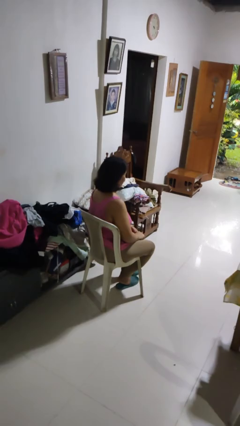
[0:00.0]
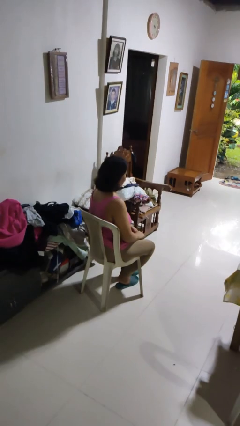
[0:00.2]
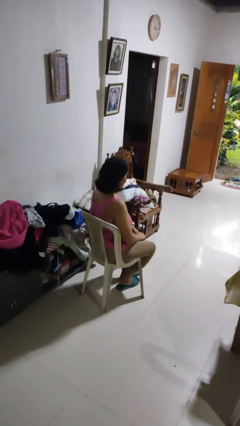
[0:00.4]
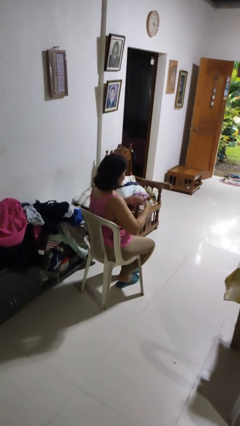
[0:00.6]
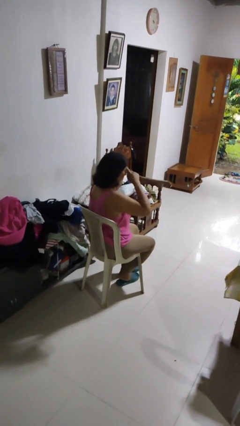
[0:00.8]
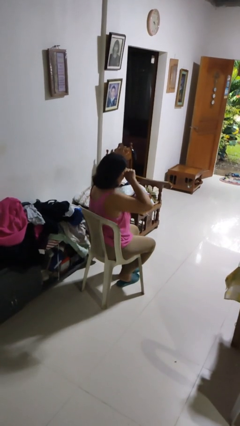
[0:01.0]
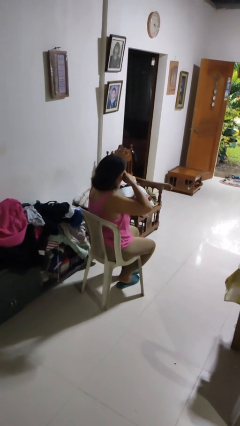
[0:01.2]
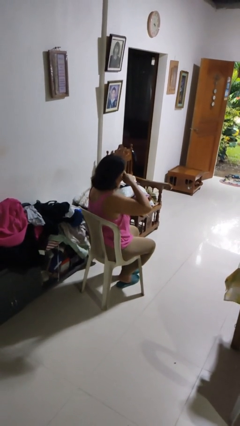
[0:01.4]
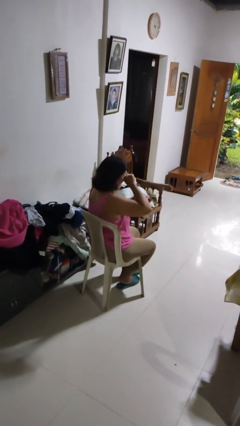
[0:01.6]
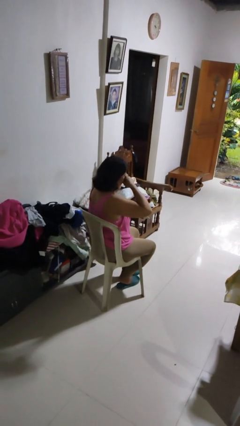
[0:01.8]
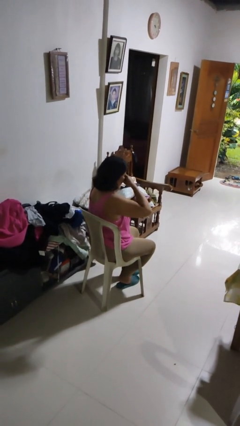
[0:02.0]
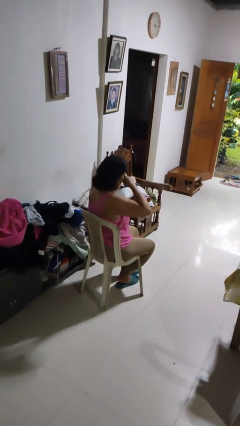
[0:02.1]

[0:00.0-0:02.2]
person rubs eyes

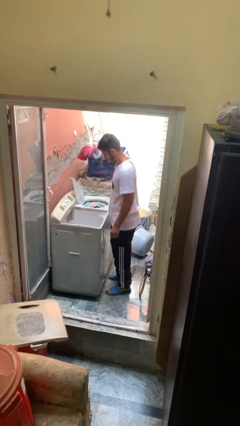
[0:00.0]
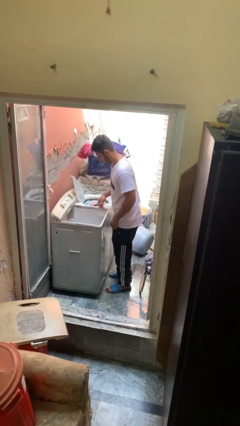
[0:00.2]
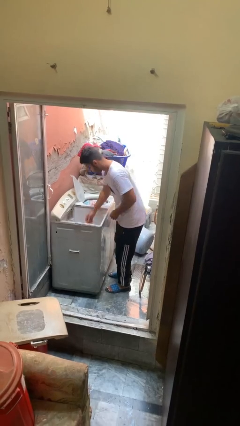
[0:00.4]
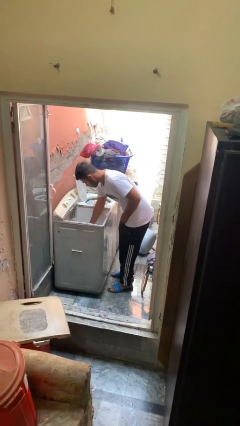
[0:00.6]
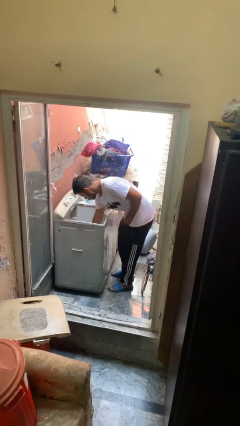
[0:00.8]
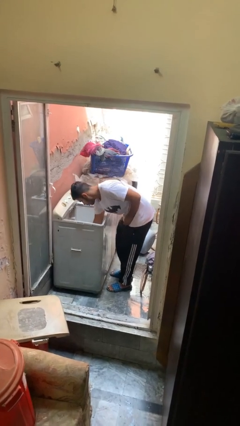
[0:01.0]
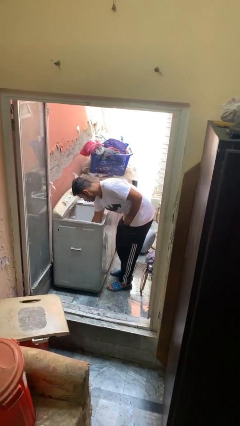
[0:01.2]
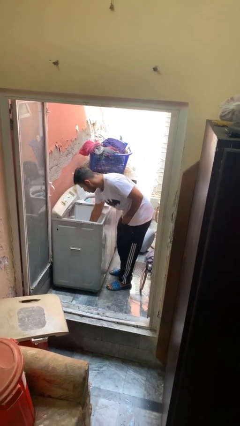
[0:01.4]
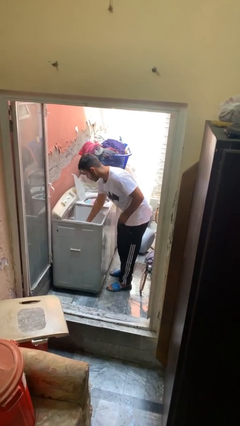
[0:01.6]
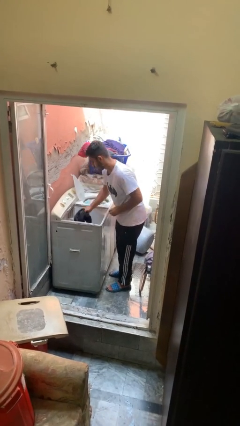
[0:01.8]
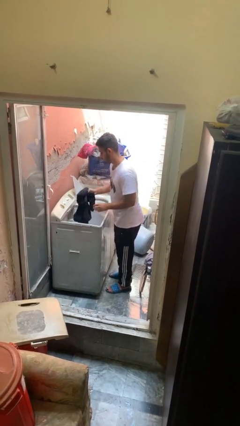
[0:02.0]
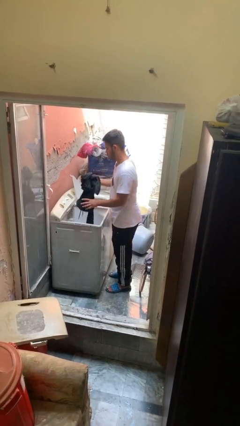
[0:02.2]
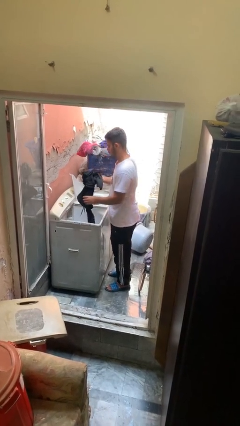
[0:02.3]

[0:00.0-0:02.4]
person unloads clotheswasher

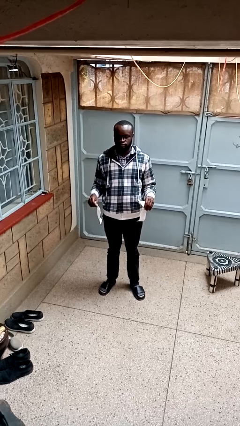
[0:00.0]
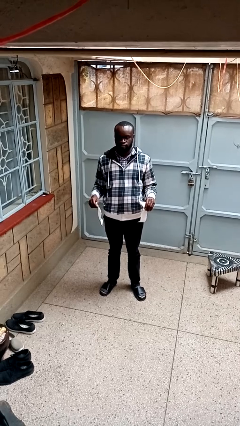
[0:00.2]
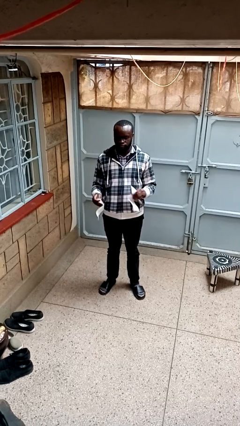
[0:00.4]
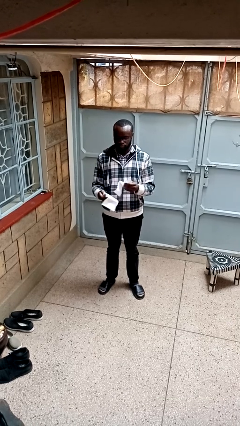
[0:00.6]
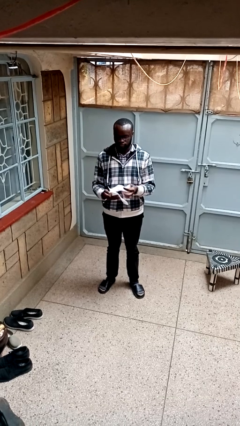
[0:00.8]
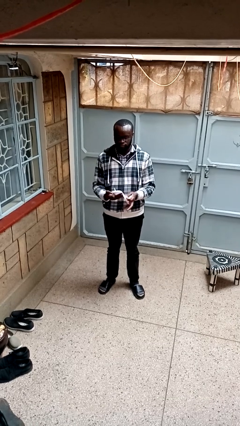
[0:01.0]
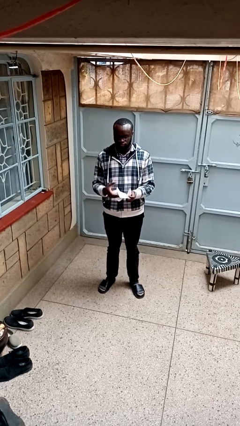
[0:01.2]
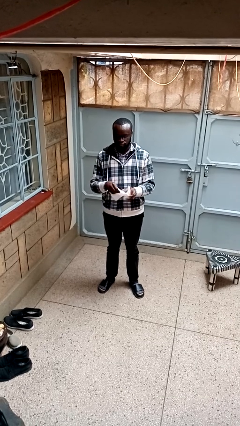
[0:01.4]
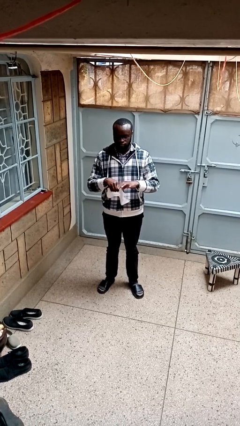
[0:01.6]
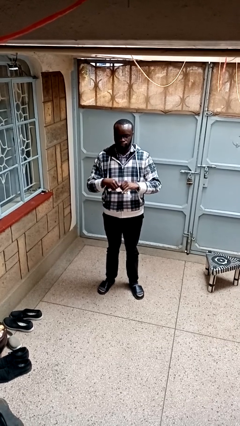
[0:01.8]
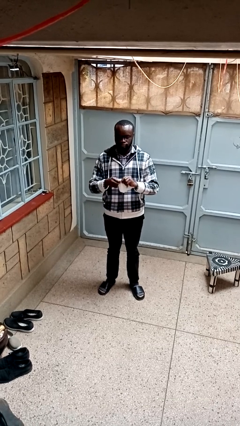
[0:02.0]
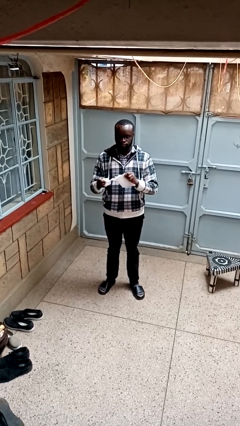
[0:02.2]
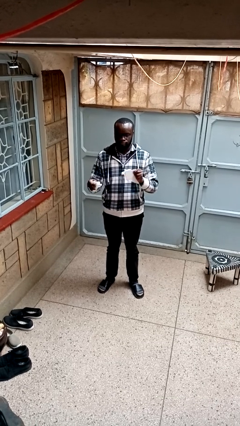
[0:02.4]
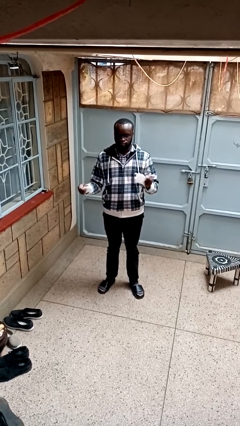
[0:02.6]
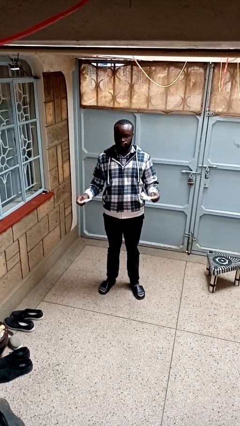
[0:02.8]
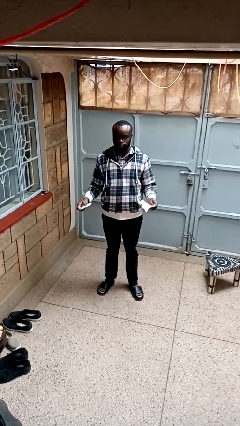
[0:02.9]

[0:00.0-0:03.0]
person tears paper

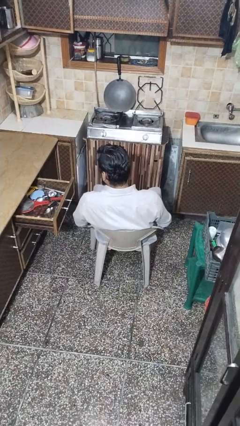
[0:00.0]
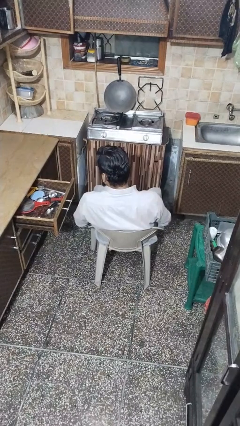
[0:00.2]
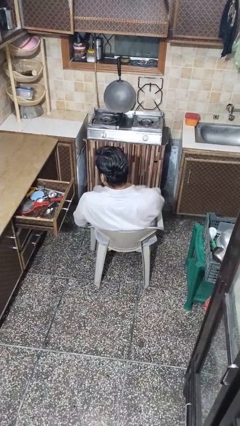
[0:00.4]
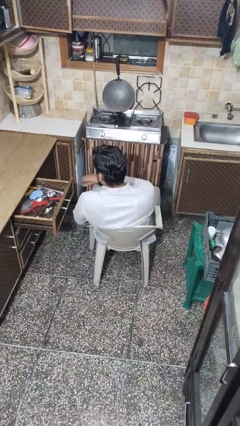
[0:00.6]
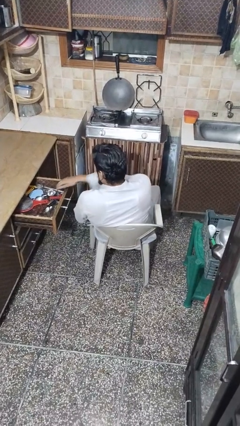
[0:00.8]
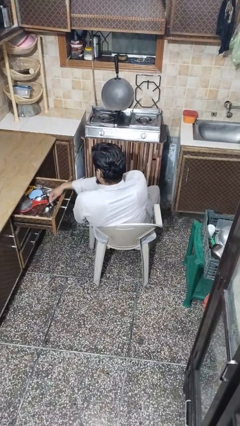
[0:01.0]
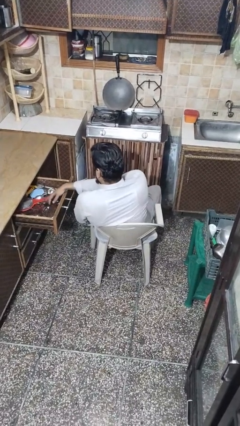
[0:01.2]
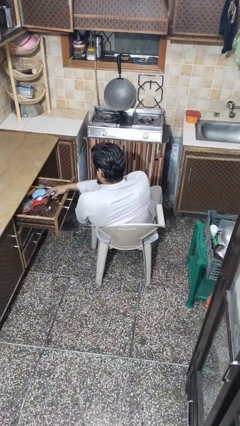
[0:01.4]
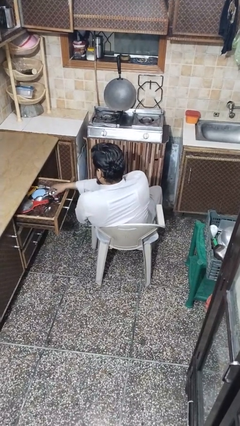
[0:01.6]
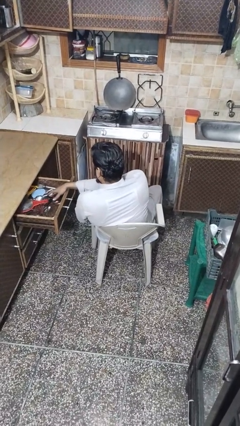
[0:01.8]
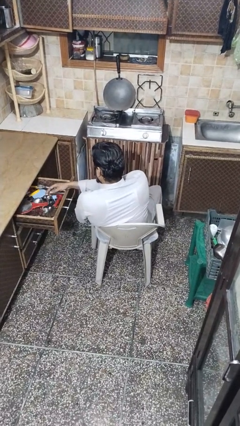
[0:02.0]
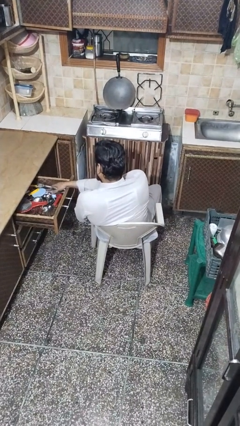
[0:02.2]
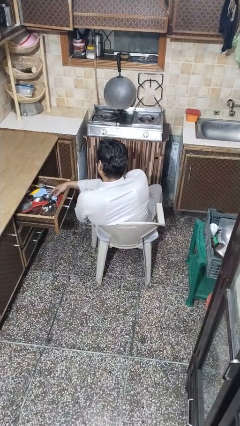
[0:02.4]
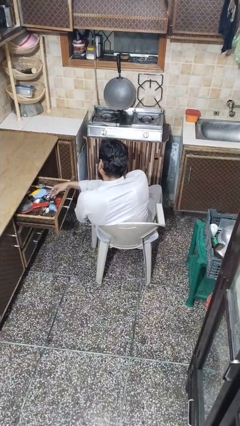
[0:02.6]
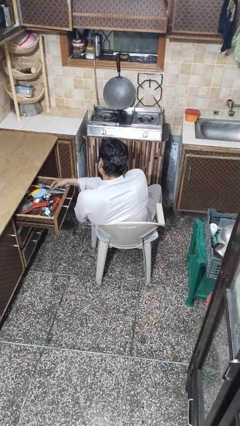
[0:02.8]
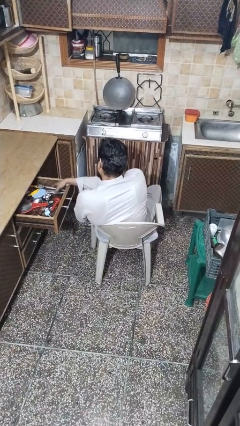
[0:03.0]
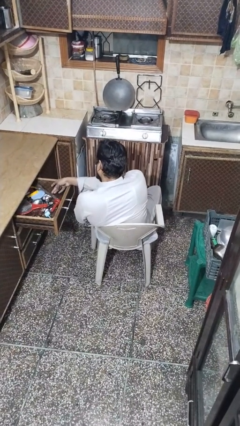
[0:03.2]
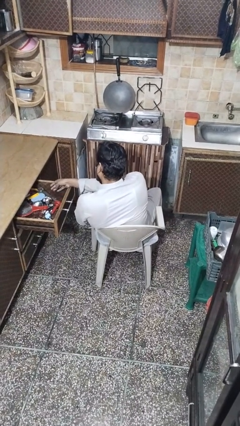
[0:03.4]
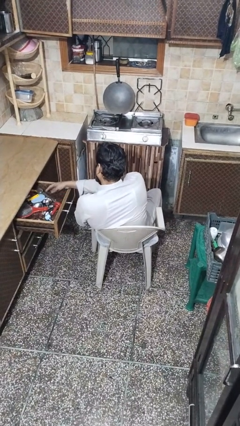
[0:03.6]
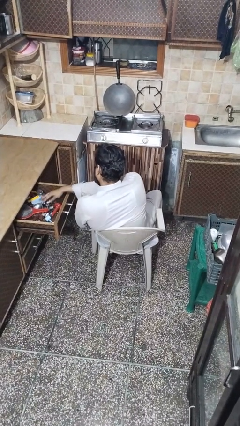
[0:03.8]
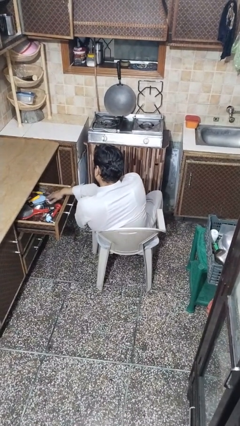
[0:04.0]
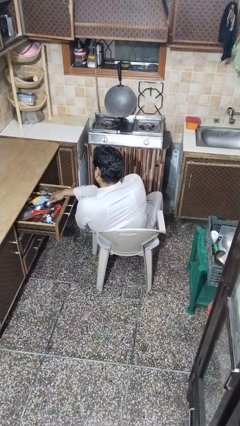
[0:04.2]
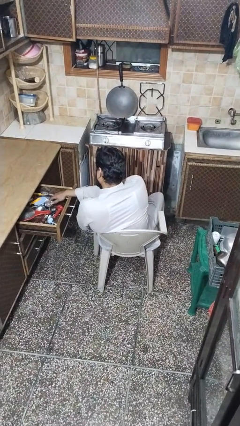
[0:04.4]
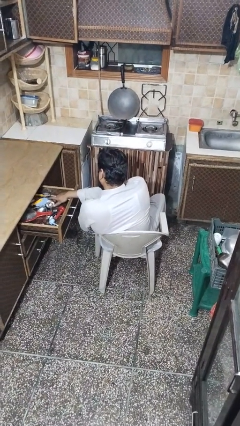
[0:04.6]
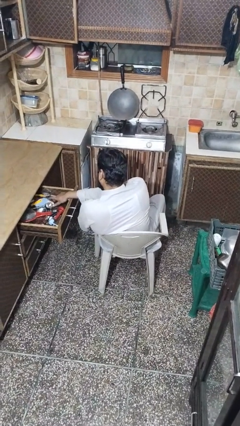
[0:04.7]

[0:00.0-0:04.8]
person searches in kitchen drawer

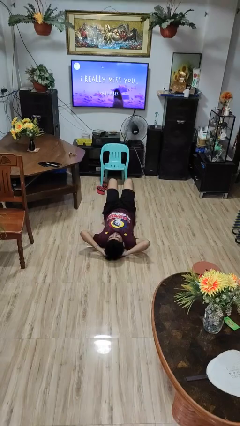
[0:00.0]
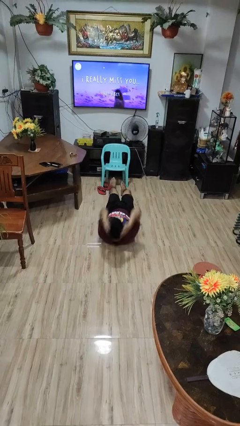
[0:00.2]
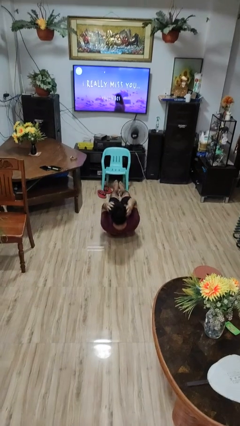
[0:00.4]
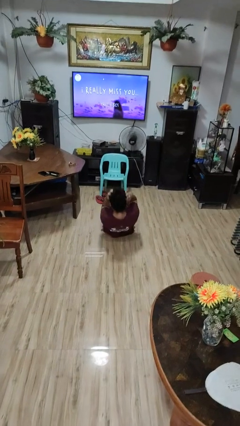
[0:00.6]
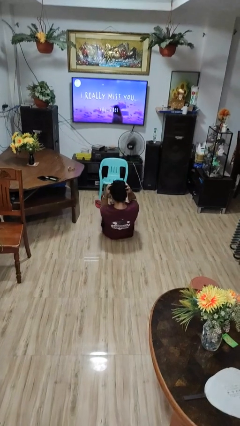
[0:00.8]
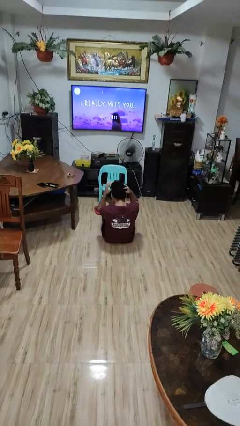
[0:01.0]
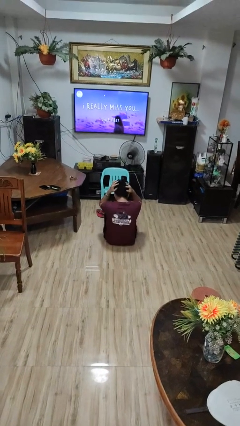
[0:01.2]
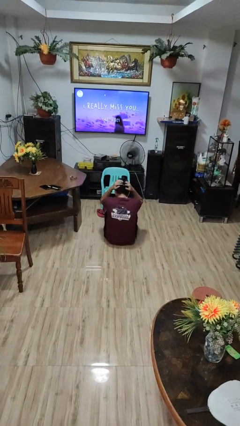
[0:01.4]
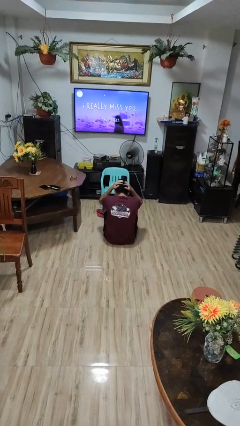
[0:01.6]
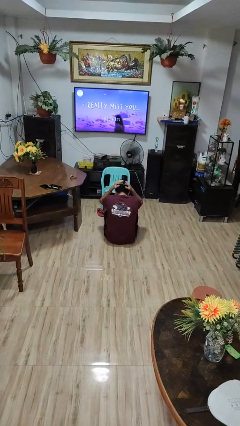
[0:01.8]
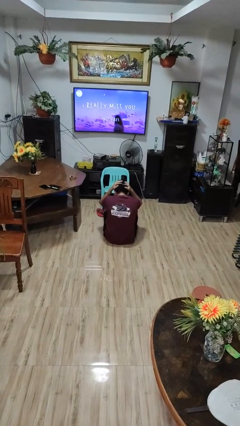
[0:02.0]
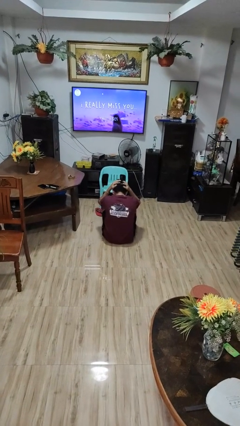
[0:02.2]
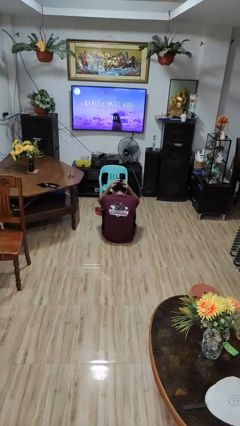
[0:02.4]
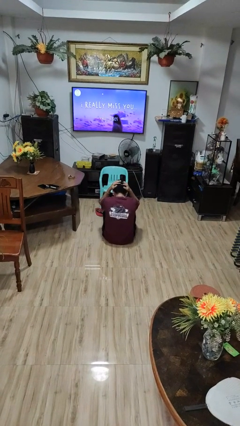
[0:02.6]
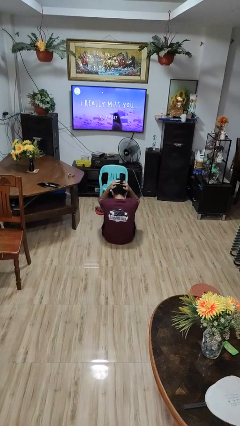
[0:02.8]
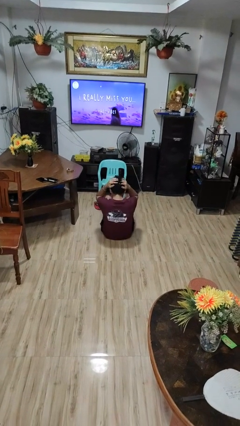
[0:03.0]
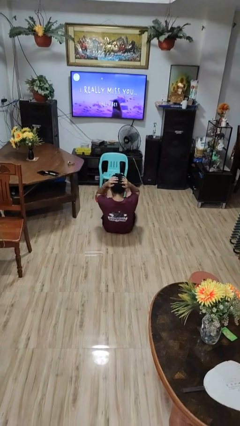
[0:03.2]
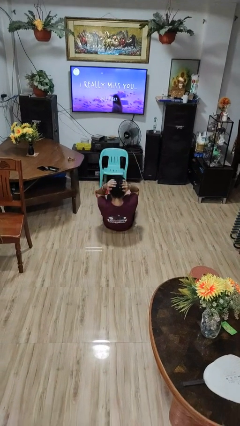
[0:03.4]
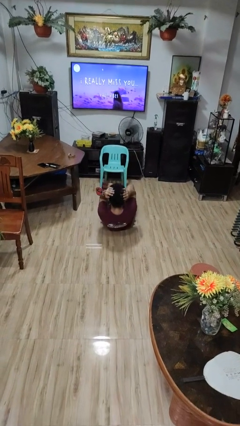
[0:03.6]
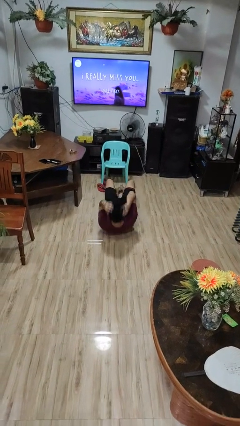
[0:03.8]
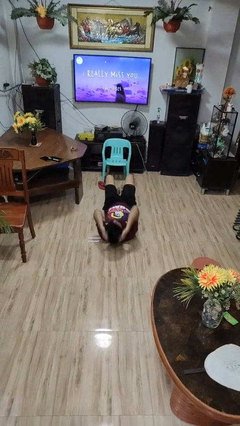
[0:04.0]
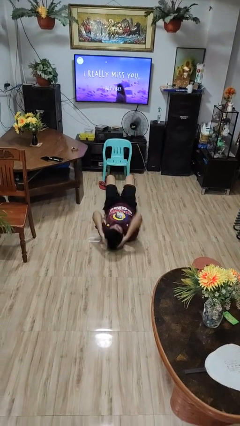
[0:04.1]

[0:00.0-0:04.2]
person exercises with situp

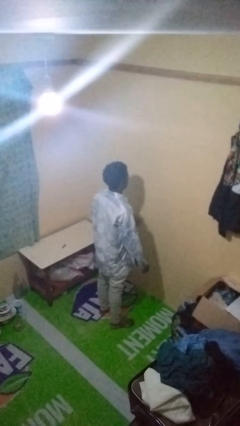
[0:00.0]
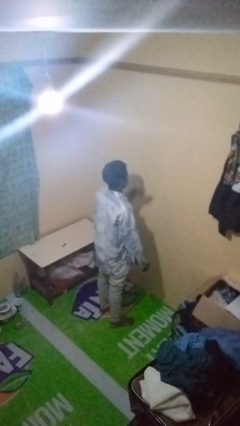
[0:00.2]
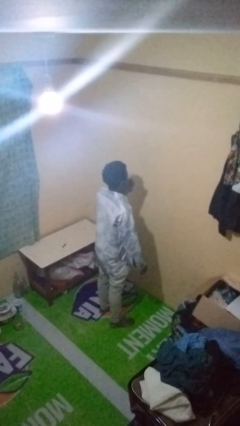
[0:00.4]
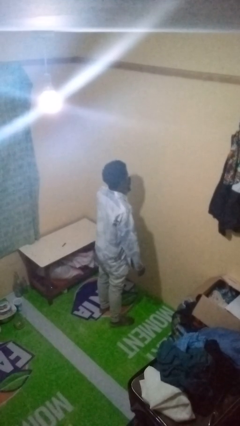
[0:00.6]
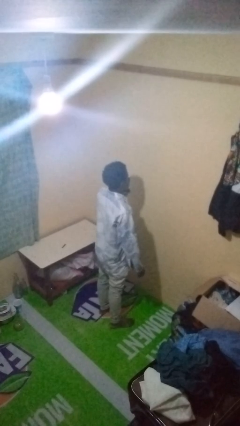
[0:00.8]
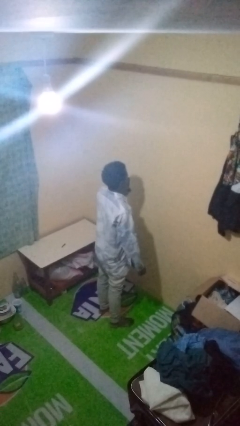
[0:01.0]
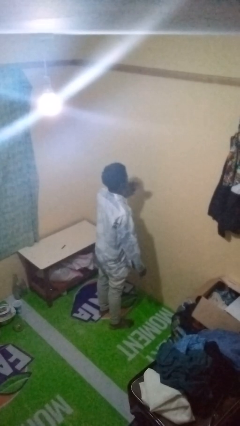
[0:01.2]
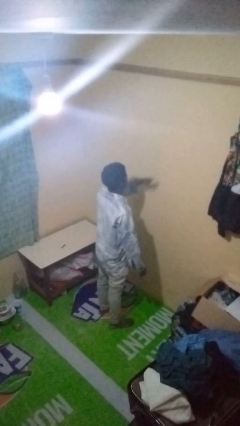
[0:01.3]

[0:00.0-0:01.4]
person gestures blow kiss
